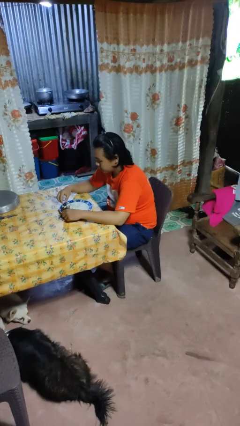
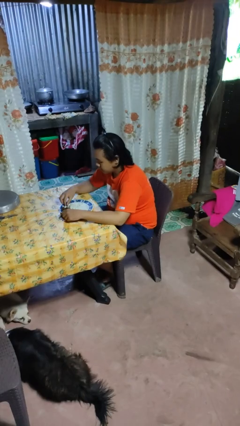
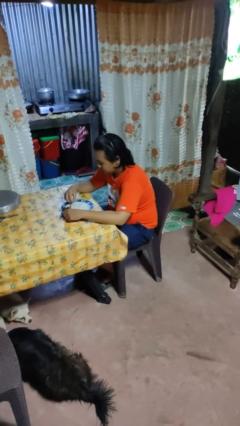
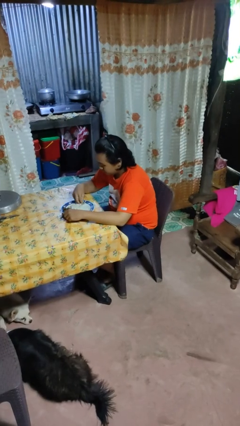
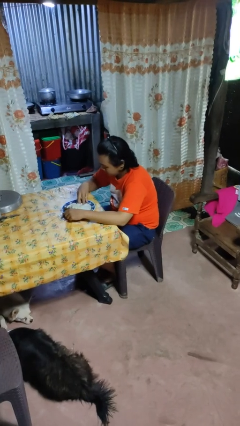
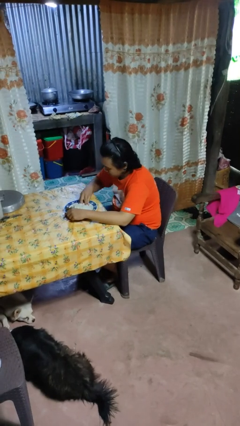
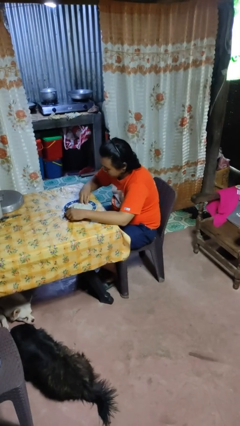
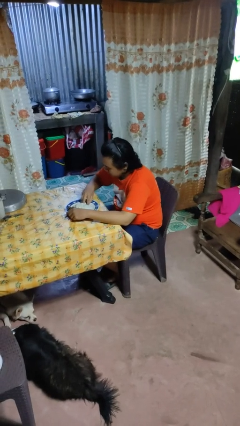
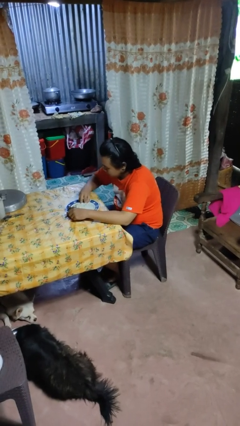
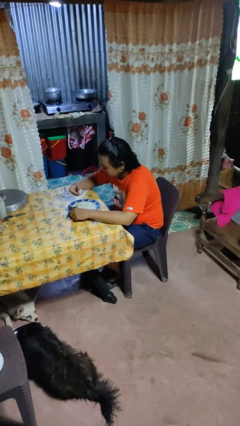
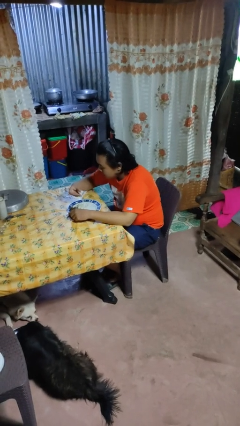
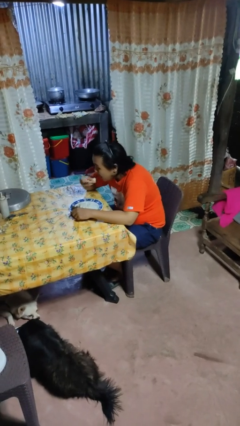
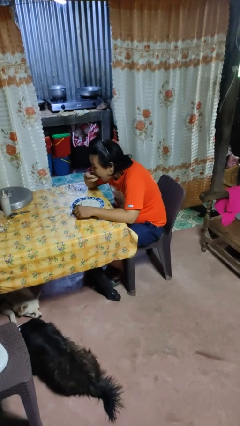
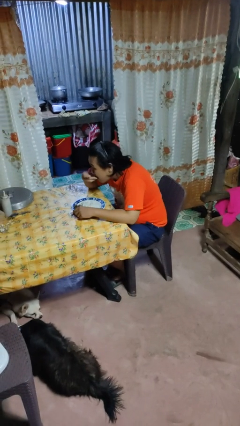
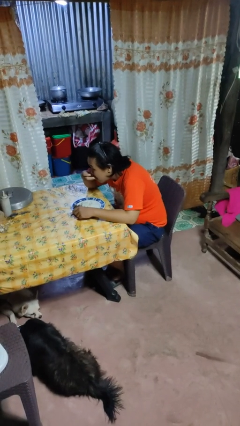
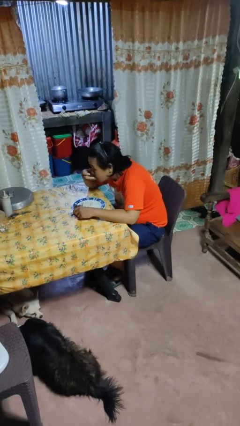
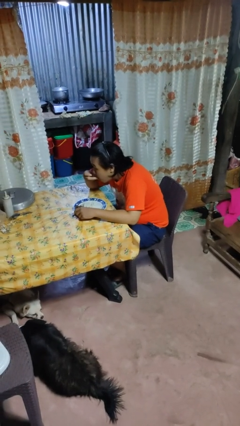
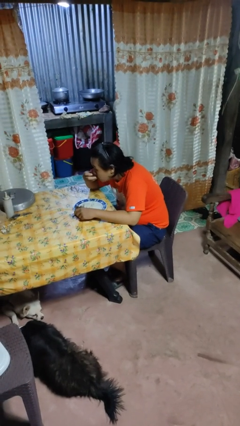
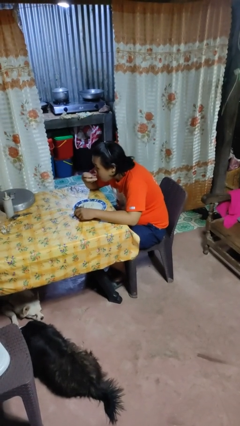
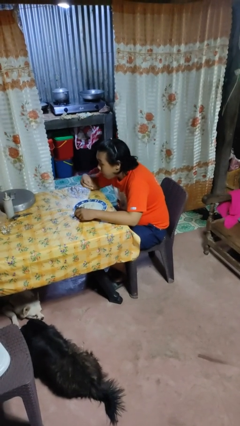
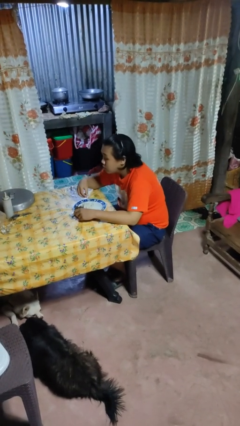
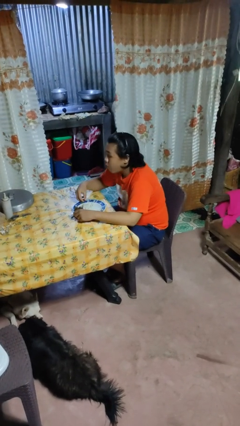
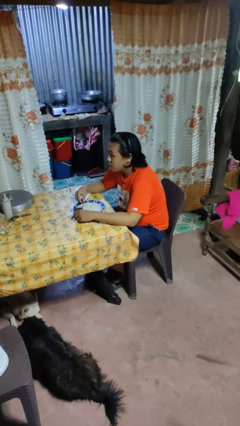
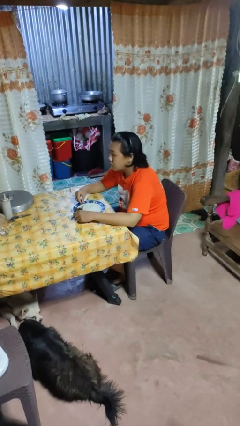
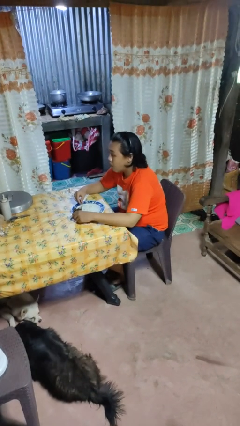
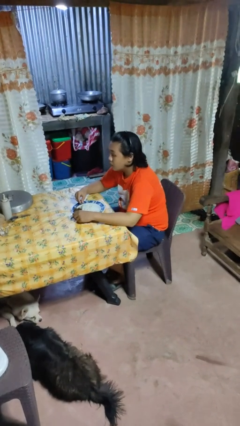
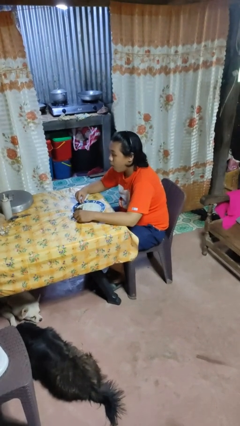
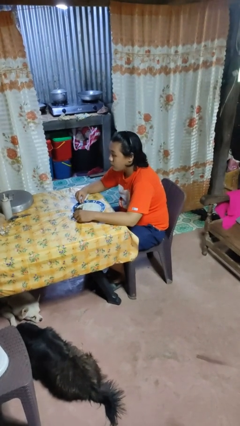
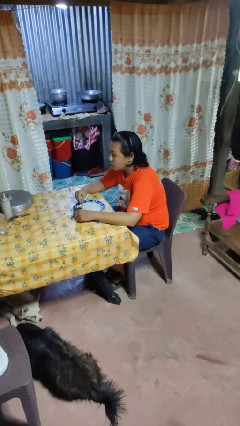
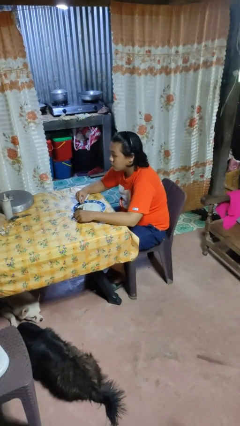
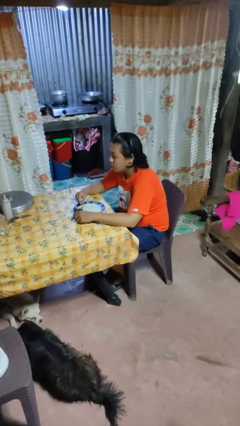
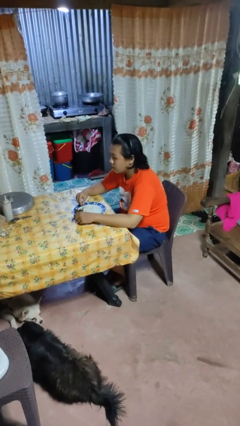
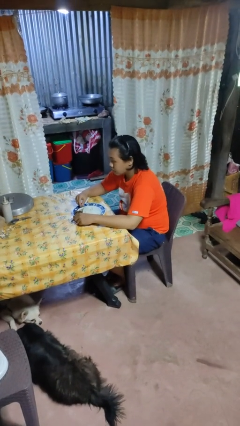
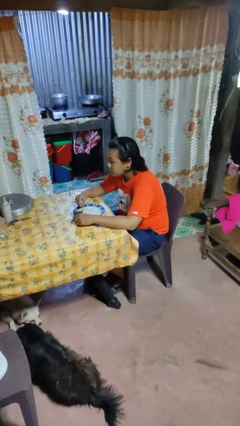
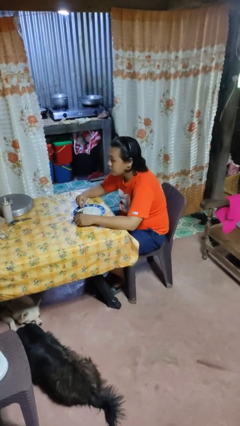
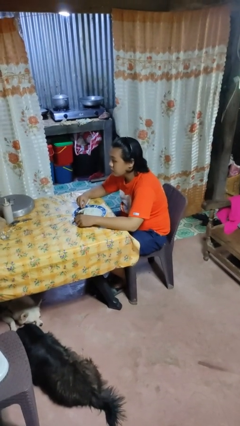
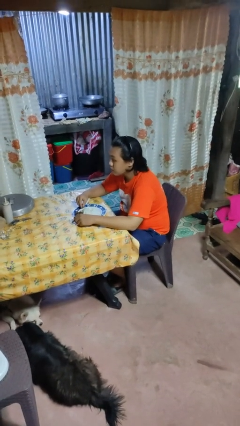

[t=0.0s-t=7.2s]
person eats with hands

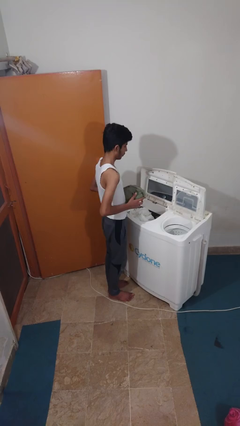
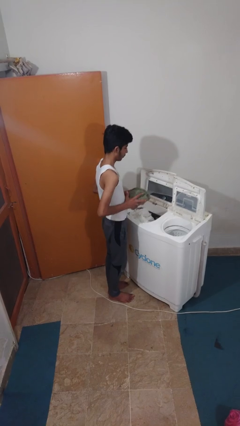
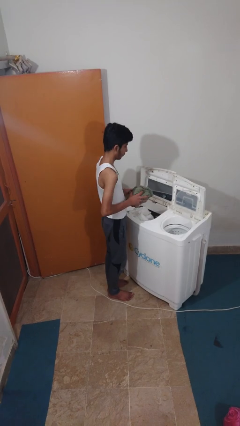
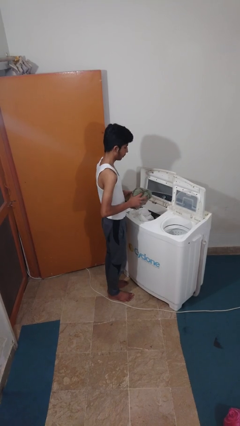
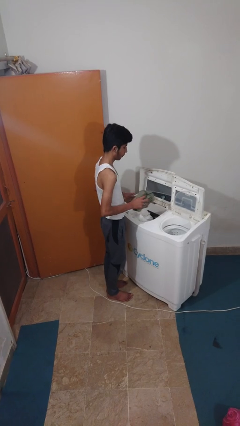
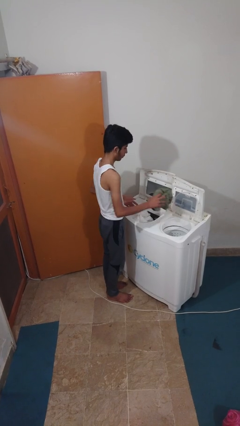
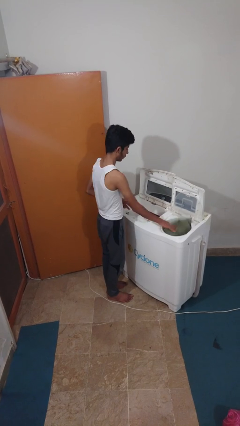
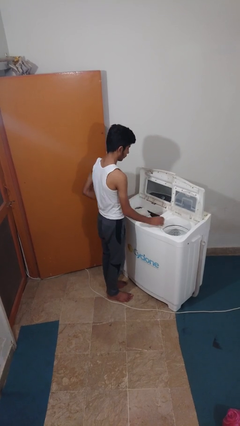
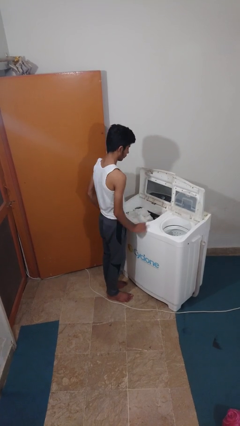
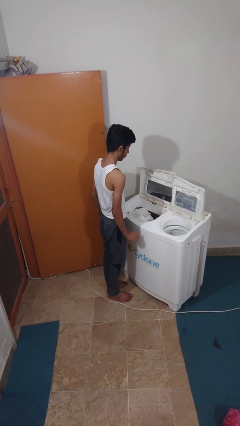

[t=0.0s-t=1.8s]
person loads dryer

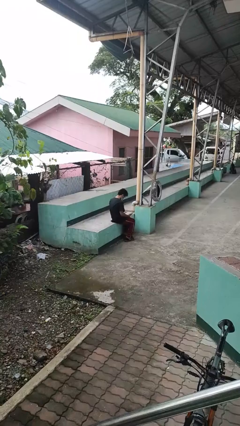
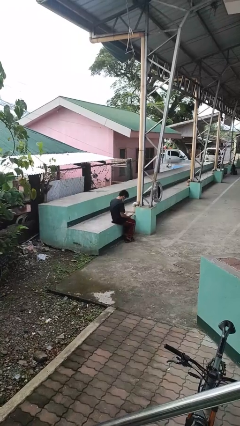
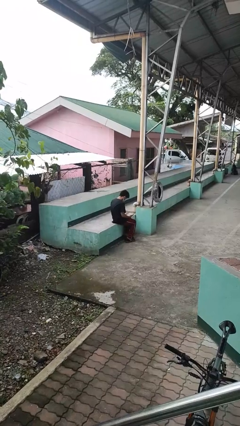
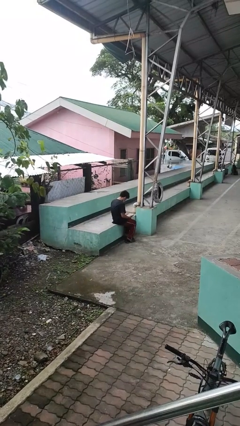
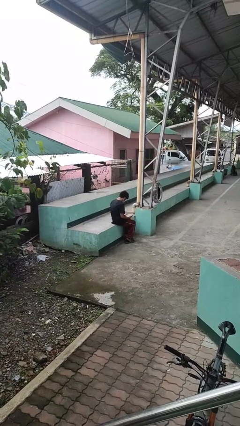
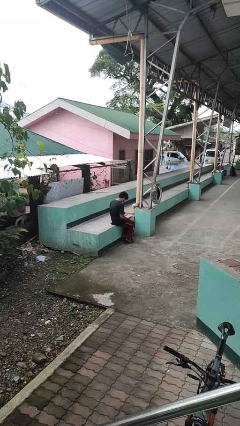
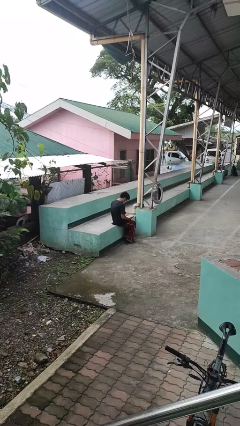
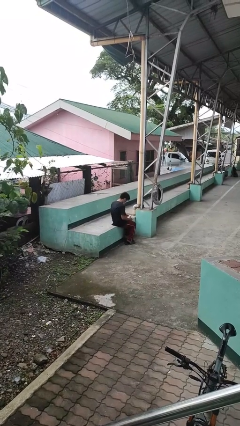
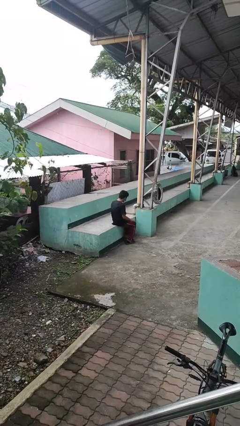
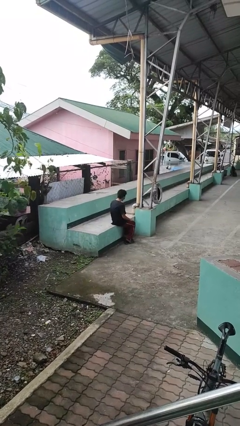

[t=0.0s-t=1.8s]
person looks at hands in lap

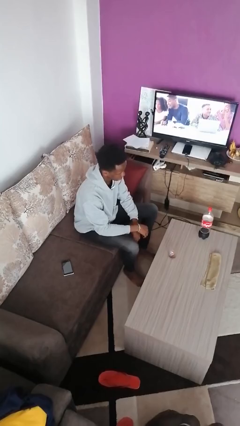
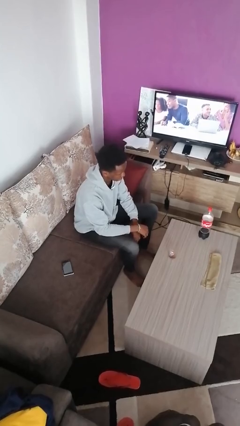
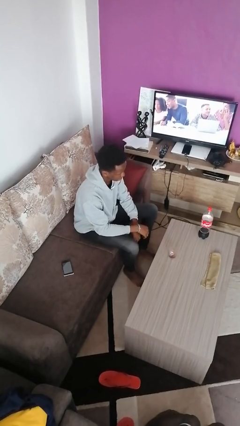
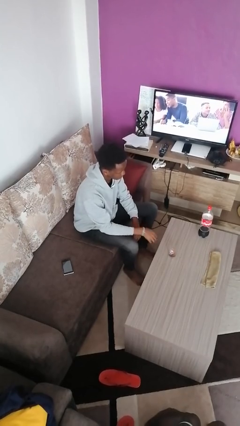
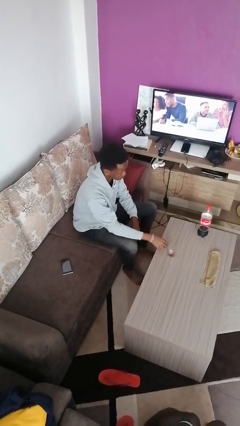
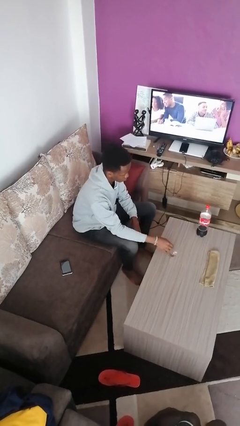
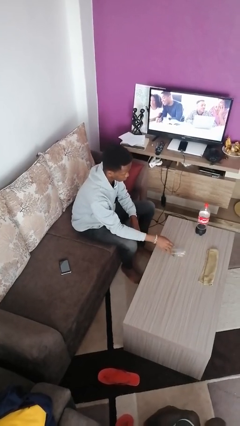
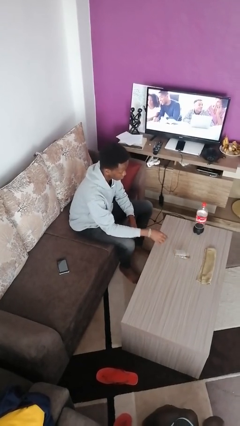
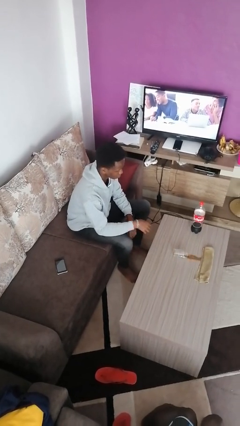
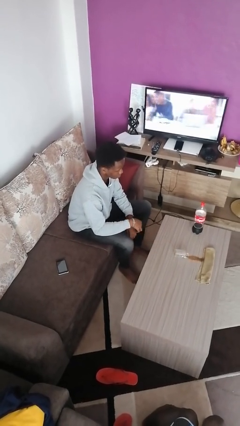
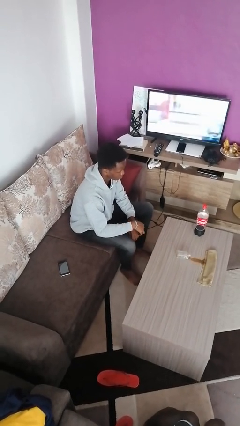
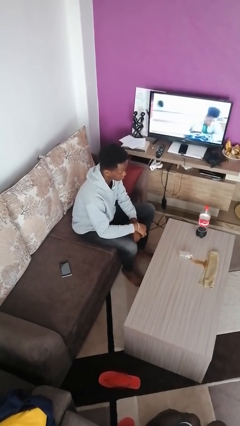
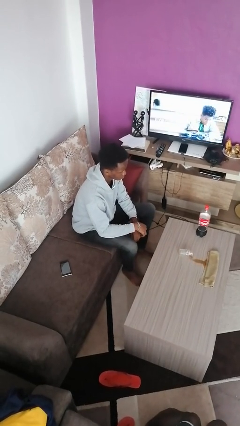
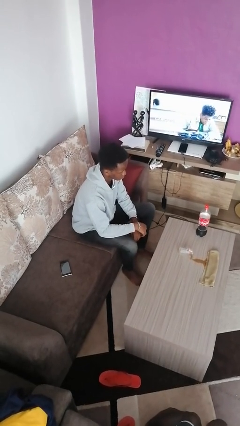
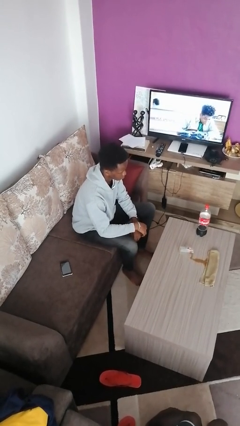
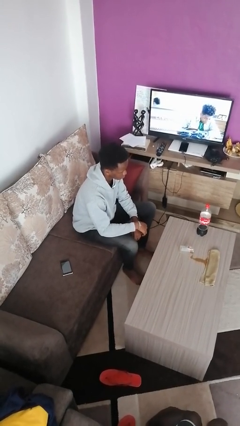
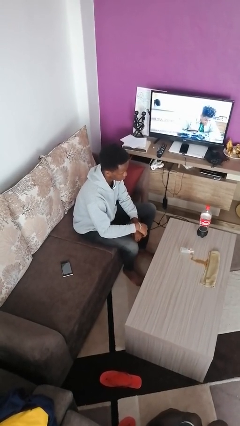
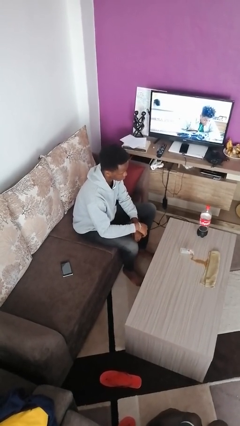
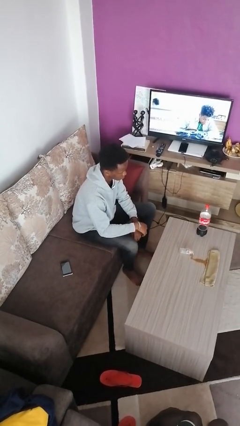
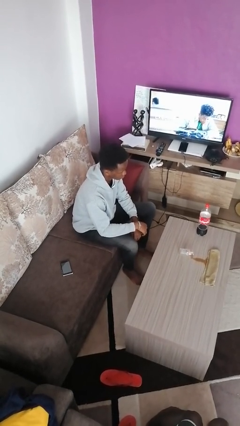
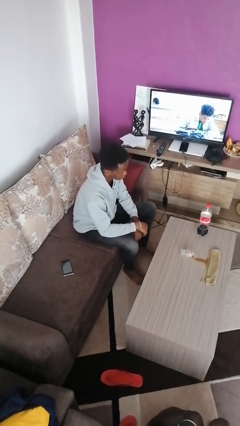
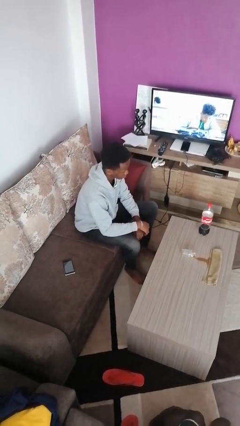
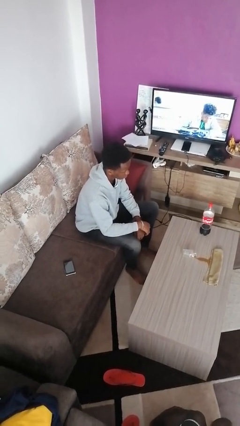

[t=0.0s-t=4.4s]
person spills on table

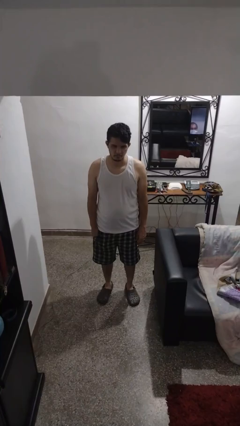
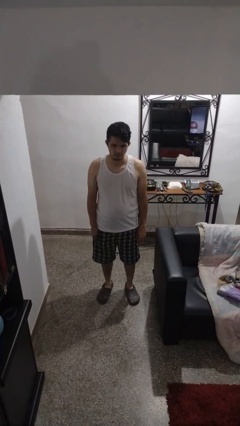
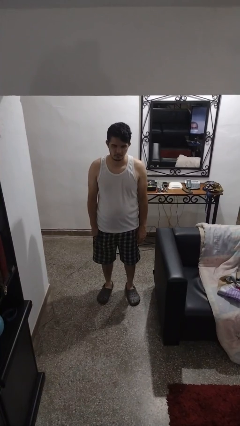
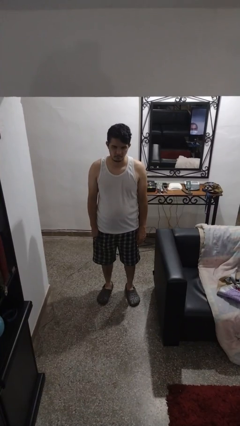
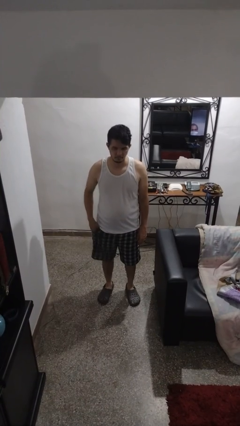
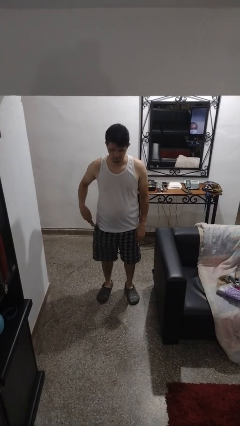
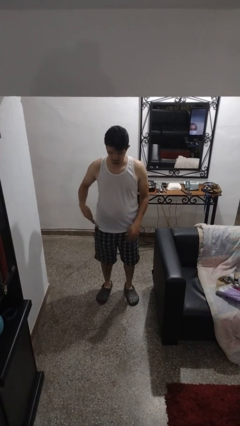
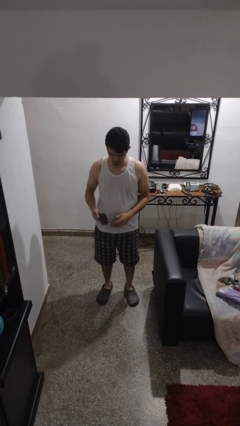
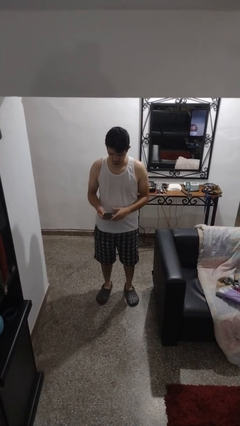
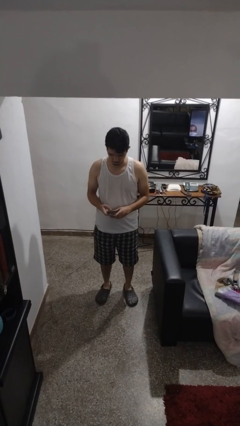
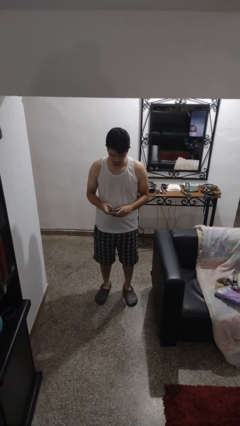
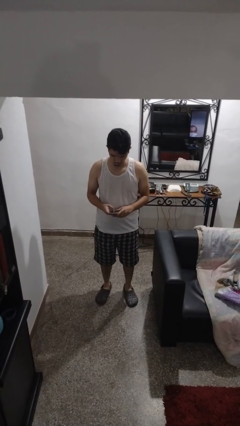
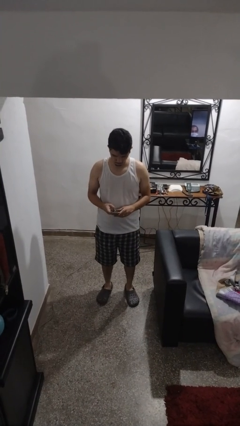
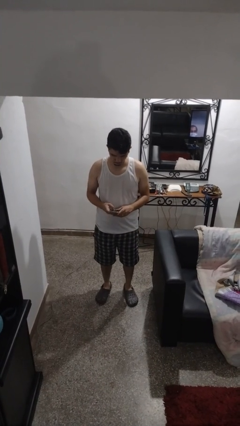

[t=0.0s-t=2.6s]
person takes phone from pocket

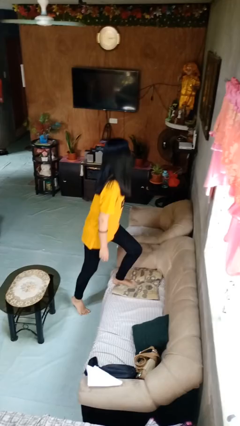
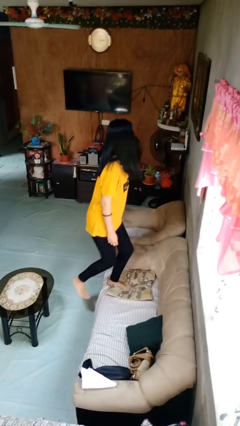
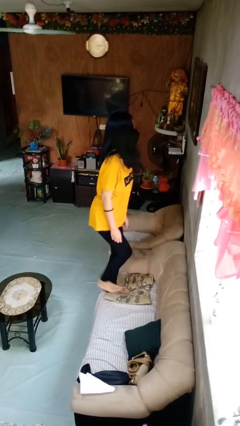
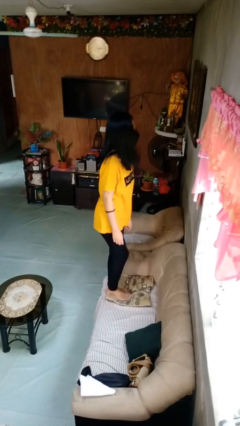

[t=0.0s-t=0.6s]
person climbs on couch
